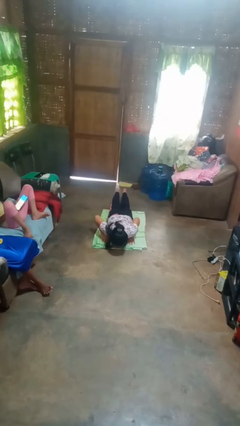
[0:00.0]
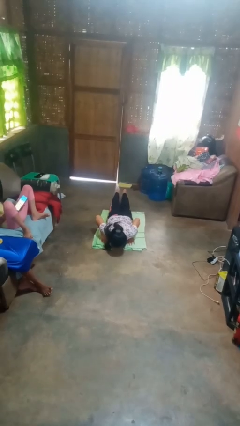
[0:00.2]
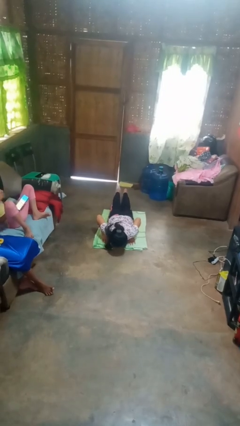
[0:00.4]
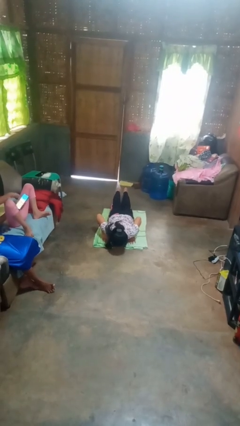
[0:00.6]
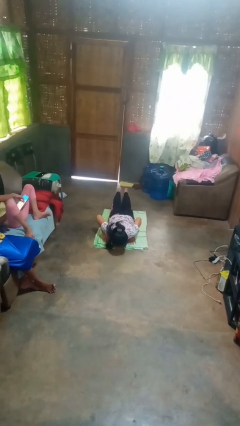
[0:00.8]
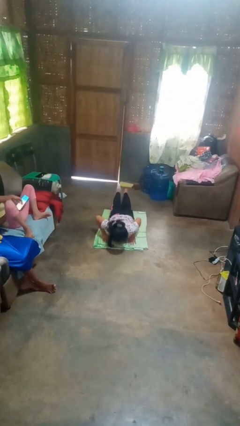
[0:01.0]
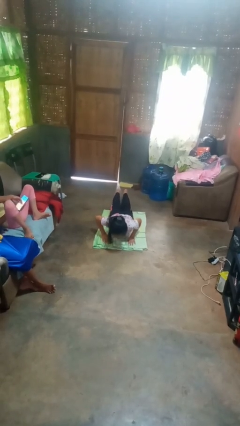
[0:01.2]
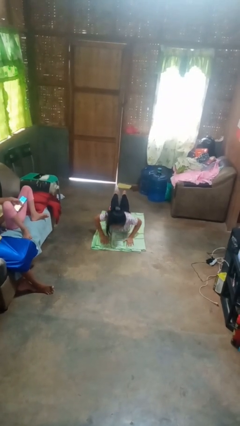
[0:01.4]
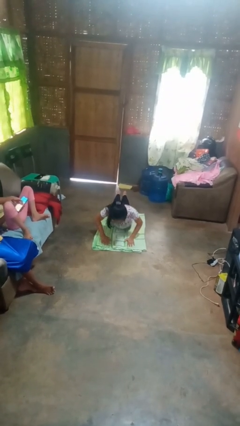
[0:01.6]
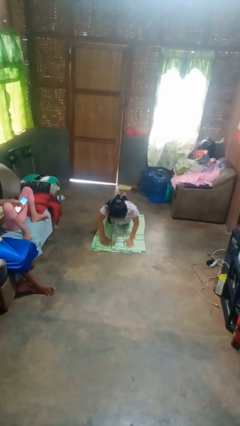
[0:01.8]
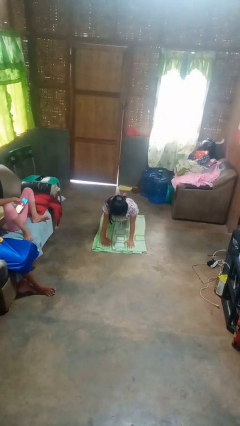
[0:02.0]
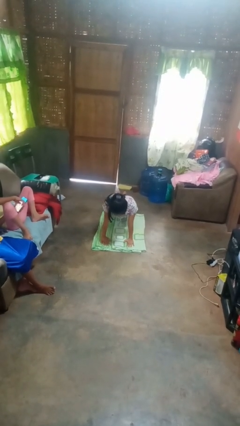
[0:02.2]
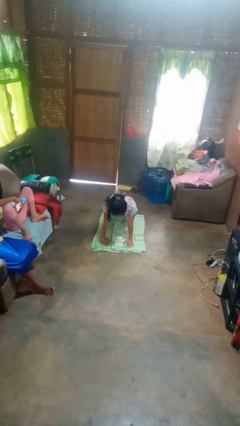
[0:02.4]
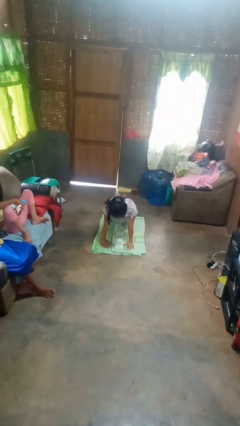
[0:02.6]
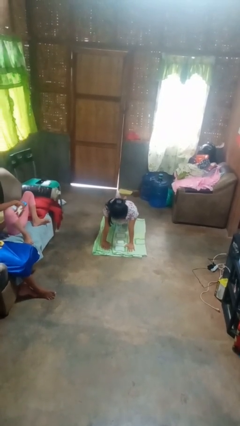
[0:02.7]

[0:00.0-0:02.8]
person exercises with pushup

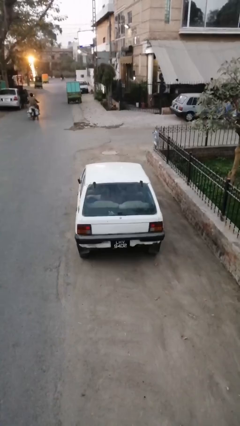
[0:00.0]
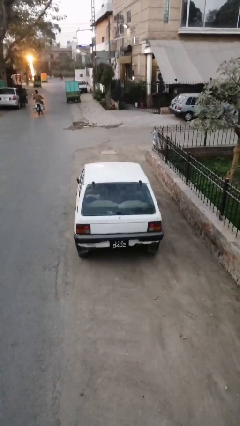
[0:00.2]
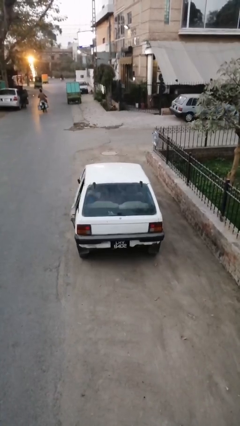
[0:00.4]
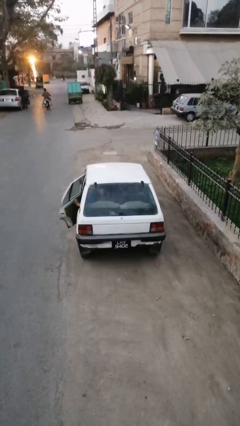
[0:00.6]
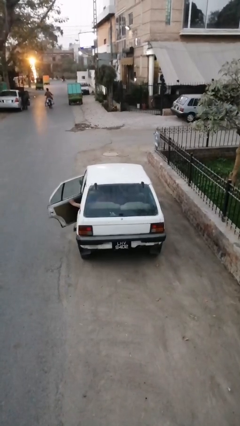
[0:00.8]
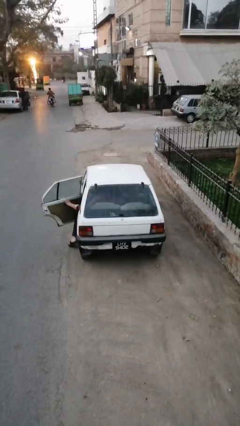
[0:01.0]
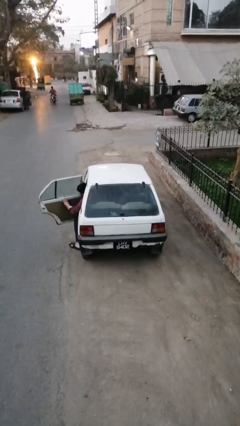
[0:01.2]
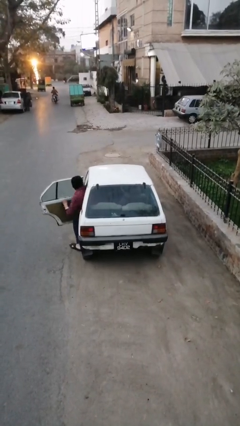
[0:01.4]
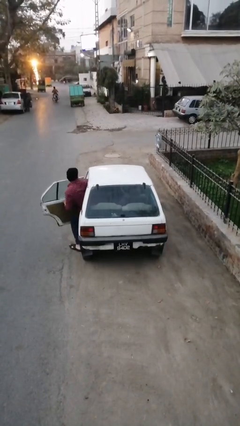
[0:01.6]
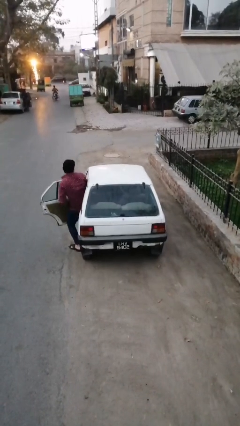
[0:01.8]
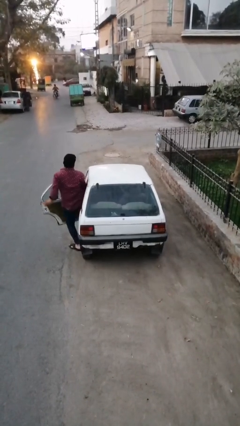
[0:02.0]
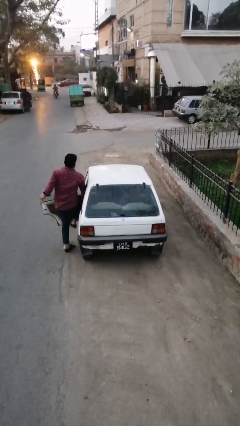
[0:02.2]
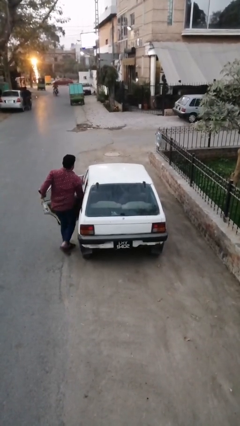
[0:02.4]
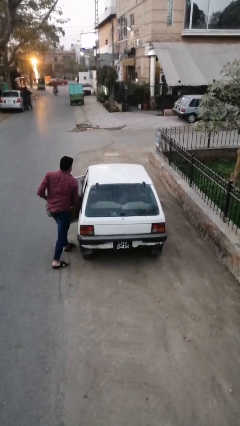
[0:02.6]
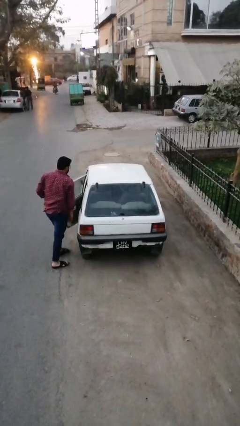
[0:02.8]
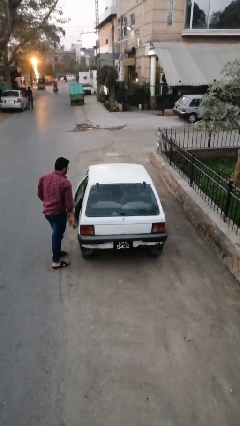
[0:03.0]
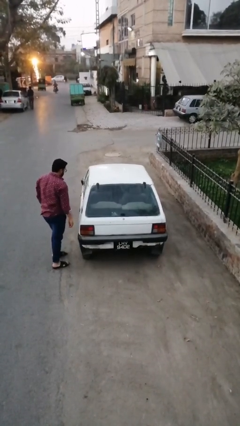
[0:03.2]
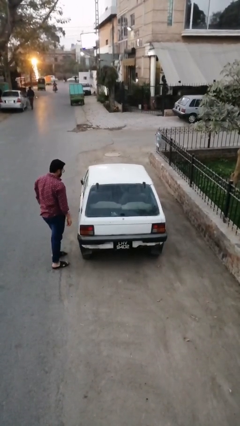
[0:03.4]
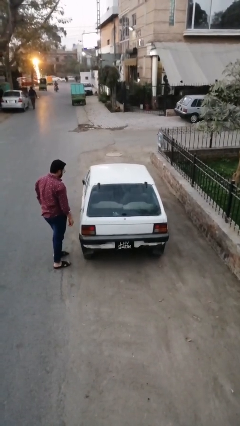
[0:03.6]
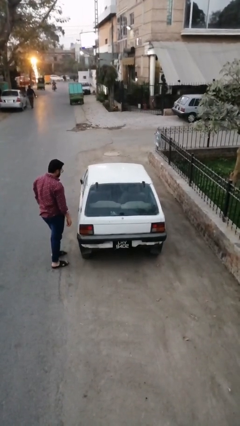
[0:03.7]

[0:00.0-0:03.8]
car drops off person

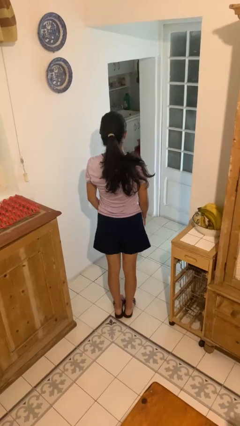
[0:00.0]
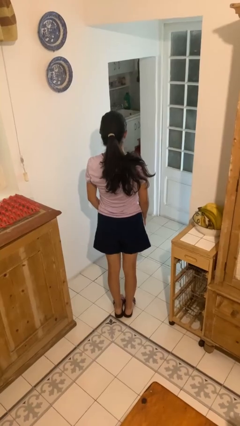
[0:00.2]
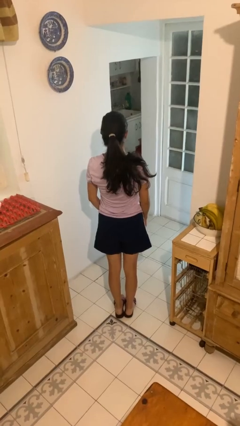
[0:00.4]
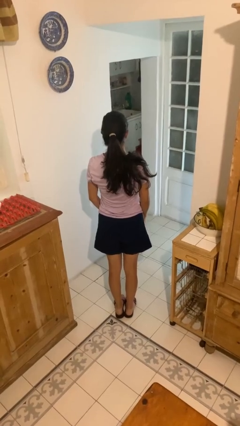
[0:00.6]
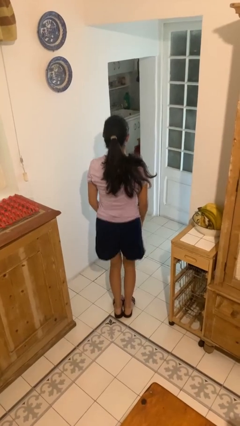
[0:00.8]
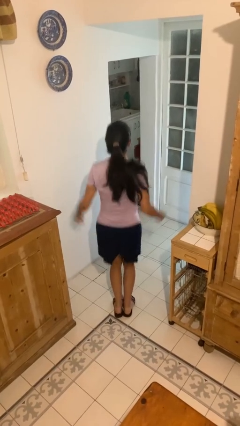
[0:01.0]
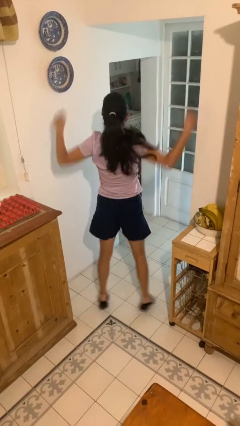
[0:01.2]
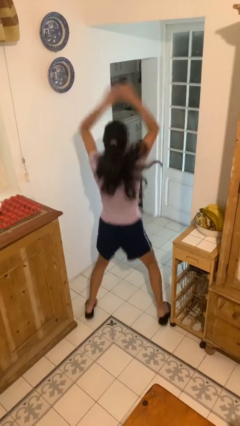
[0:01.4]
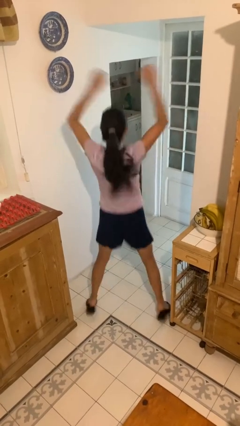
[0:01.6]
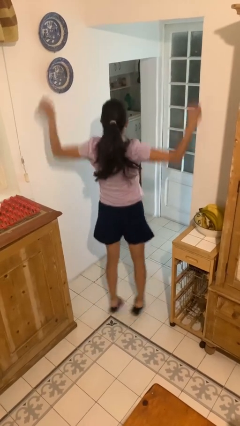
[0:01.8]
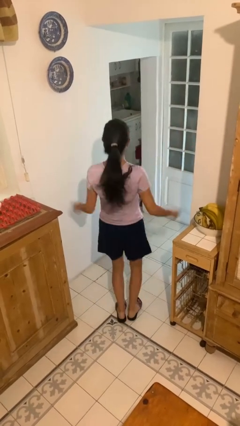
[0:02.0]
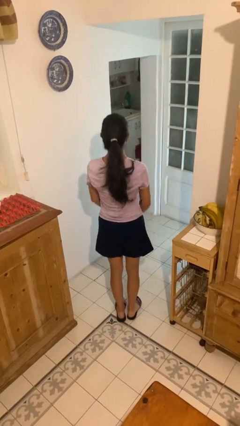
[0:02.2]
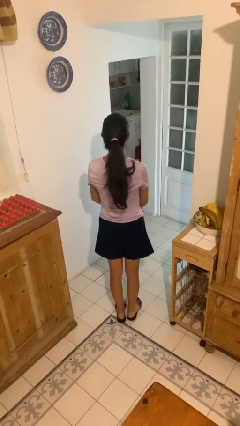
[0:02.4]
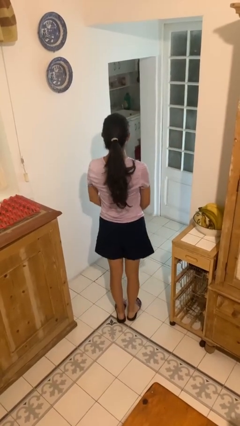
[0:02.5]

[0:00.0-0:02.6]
person exercises with jumping jacks

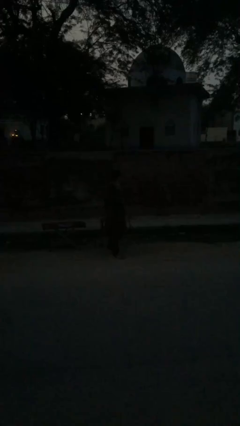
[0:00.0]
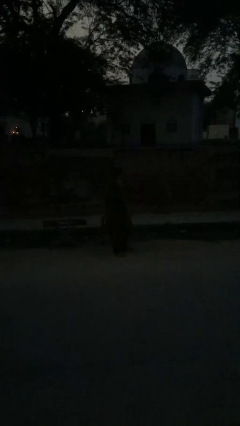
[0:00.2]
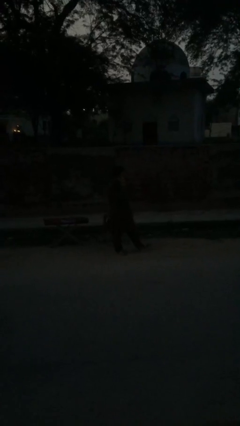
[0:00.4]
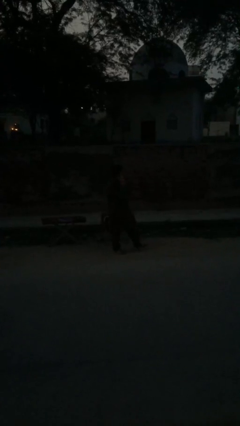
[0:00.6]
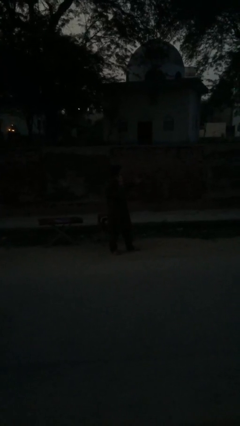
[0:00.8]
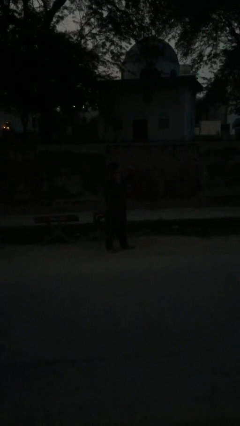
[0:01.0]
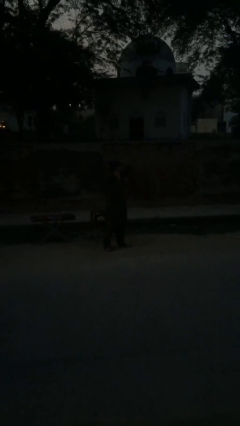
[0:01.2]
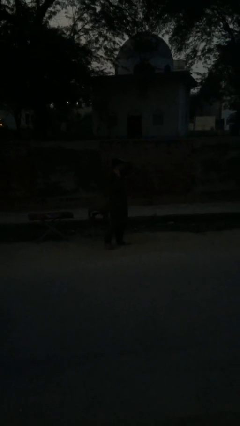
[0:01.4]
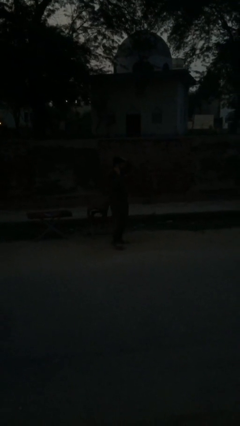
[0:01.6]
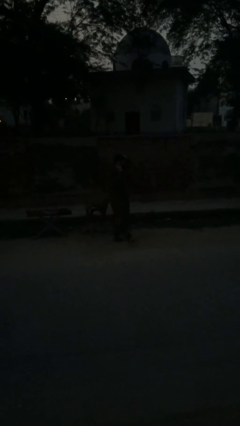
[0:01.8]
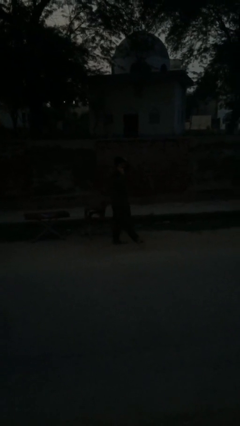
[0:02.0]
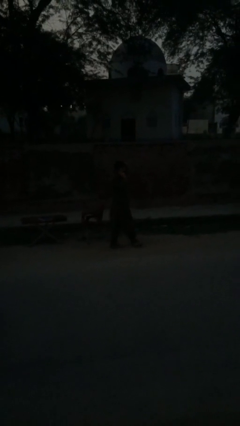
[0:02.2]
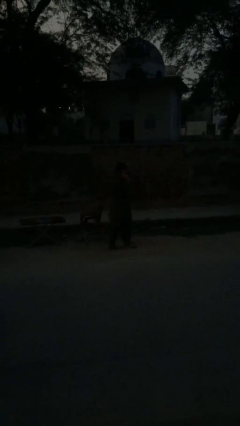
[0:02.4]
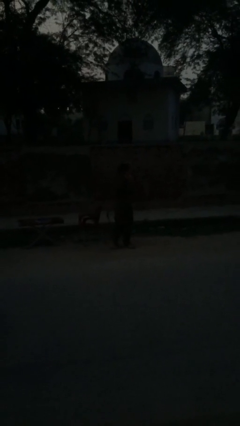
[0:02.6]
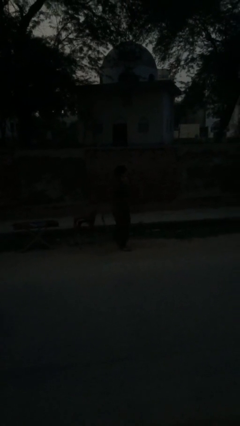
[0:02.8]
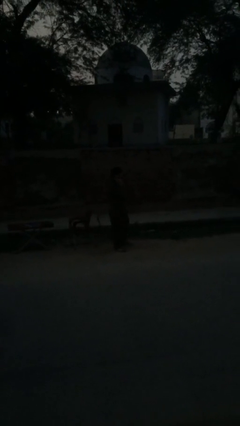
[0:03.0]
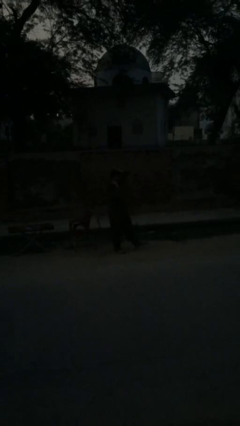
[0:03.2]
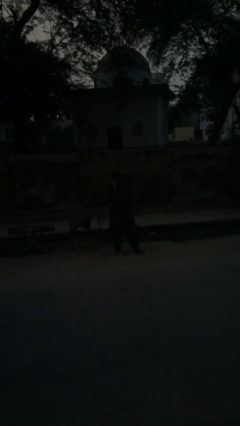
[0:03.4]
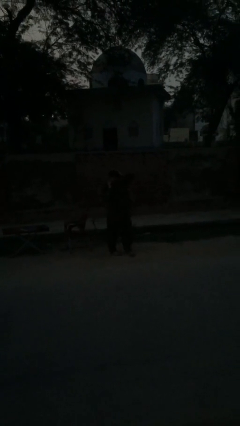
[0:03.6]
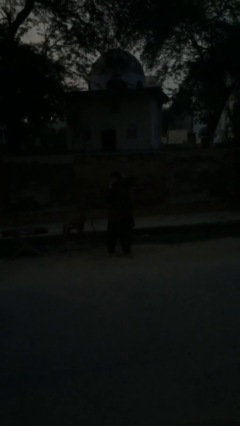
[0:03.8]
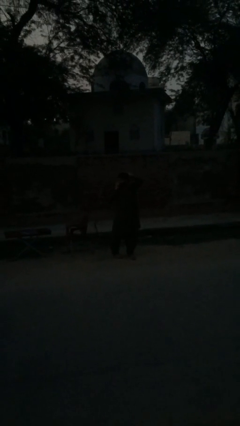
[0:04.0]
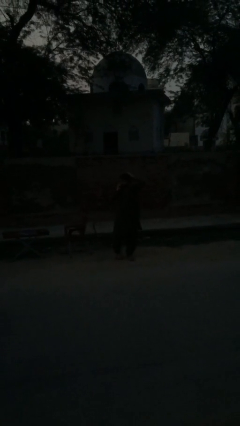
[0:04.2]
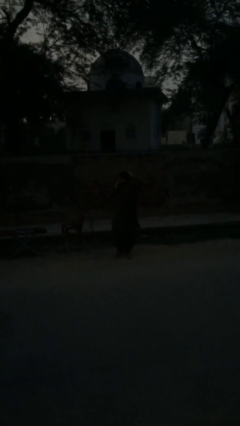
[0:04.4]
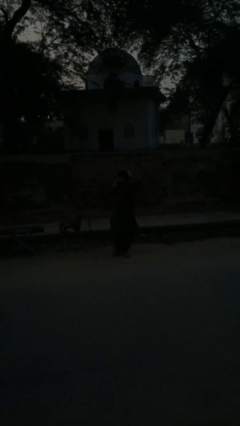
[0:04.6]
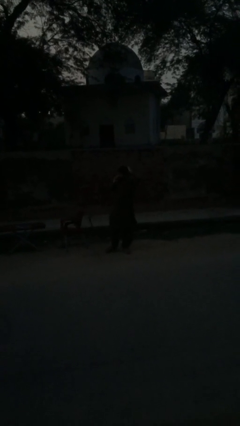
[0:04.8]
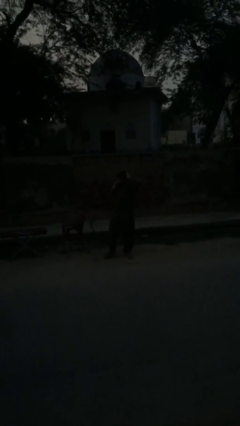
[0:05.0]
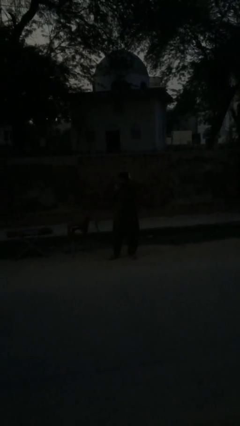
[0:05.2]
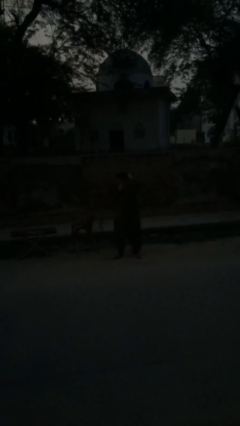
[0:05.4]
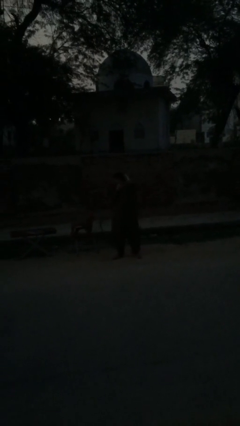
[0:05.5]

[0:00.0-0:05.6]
person talks on phone

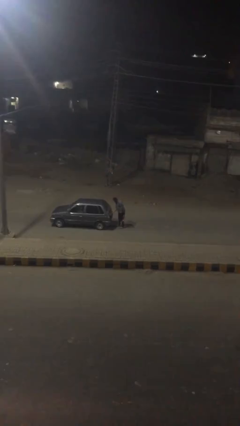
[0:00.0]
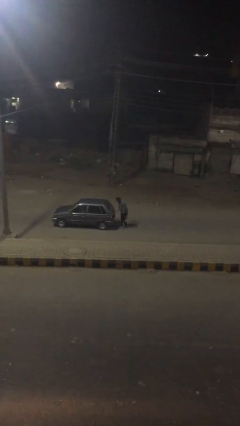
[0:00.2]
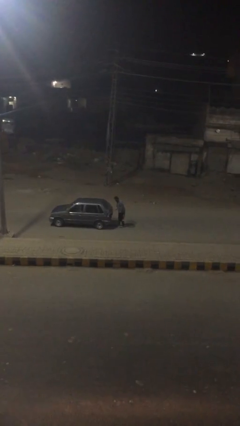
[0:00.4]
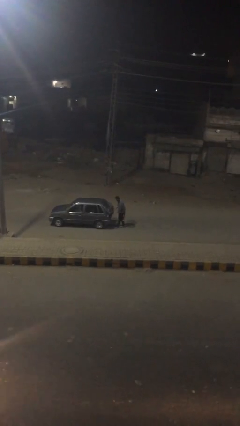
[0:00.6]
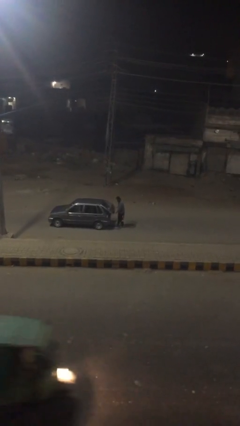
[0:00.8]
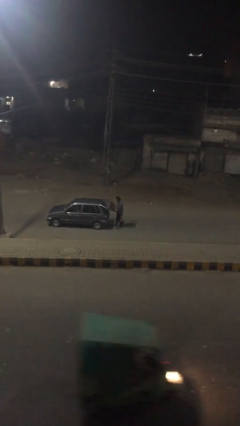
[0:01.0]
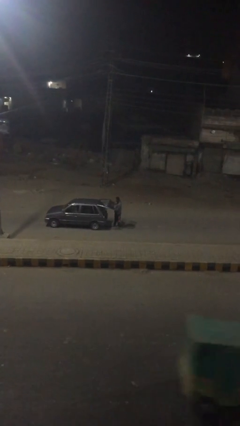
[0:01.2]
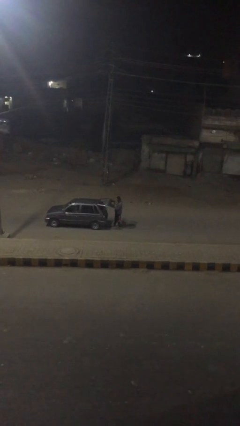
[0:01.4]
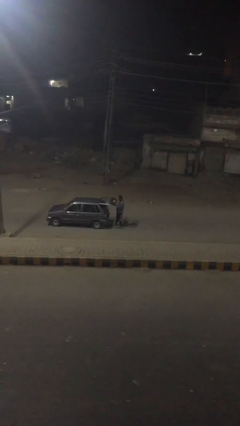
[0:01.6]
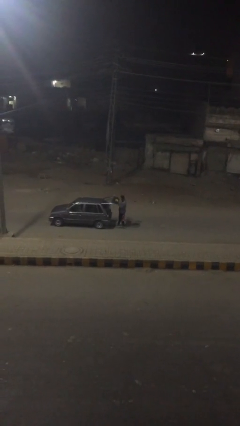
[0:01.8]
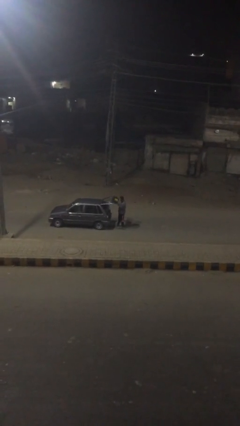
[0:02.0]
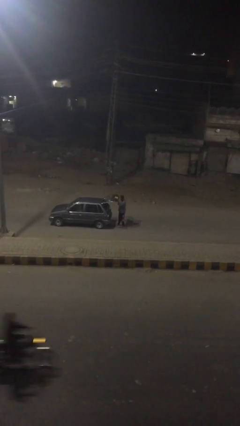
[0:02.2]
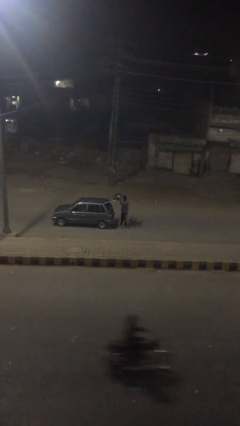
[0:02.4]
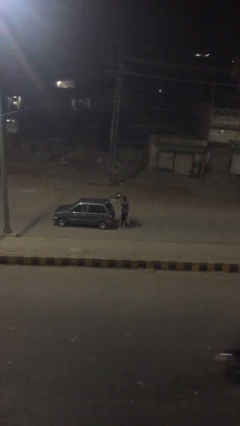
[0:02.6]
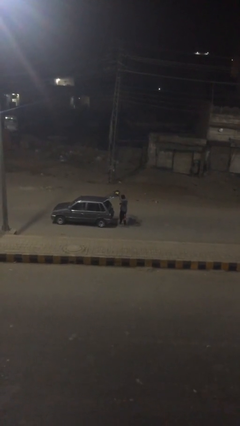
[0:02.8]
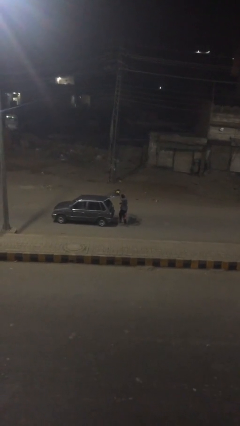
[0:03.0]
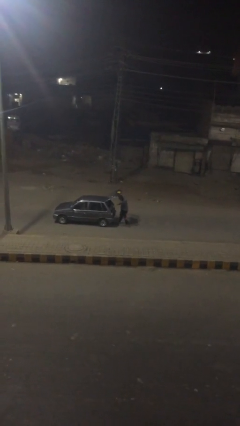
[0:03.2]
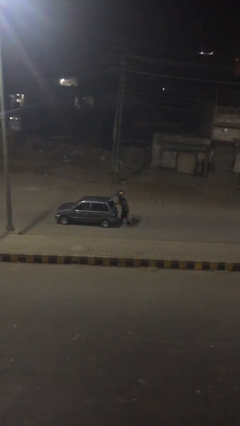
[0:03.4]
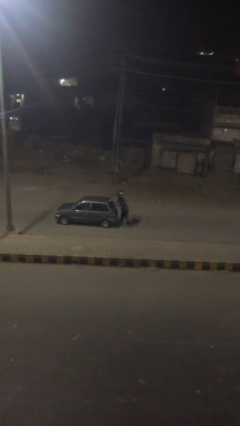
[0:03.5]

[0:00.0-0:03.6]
person opens car trunk
